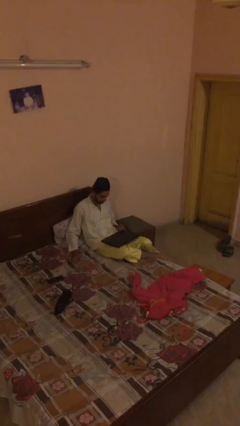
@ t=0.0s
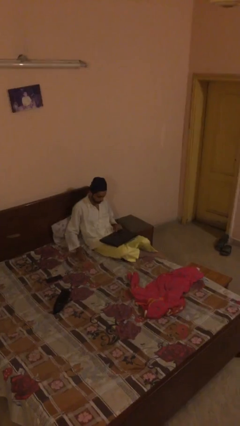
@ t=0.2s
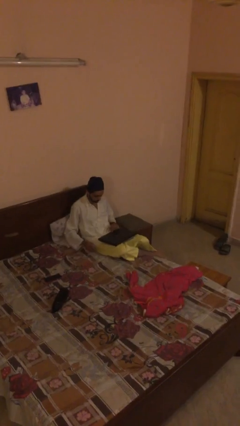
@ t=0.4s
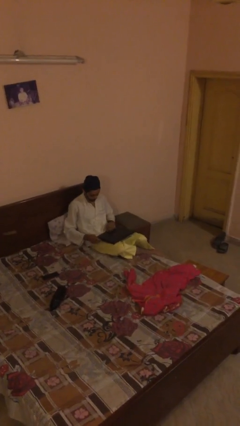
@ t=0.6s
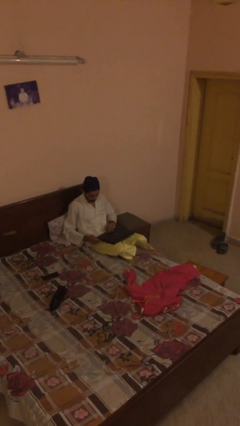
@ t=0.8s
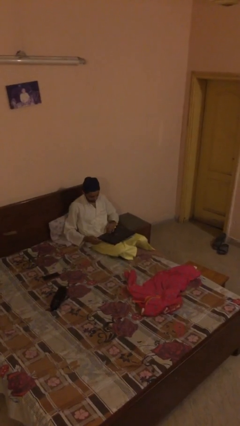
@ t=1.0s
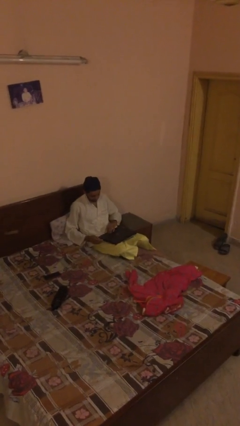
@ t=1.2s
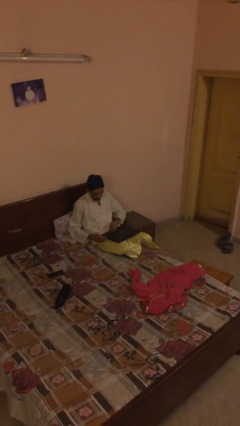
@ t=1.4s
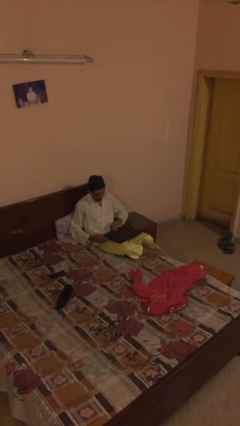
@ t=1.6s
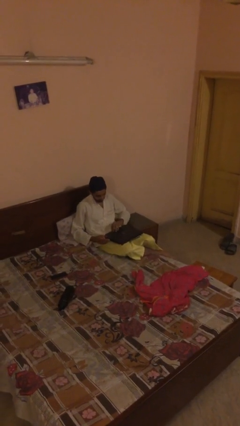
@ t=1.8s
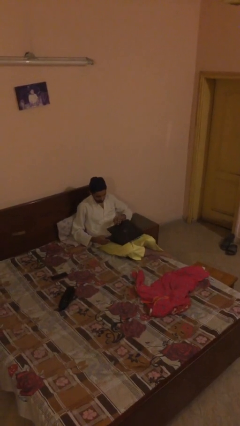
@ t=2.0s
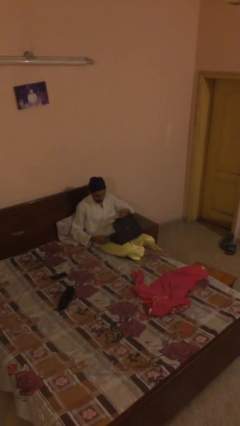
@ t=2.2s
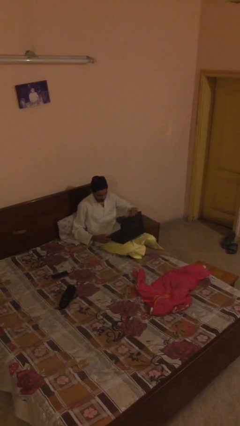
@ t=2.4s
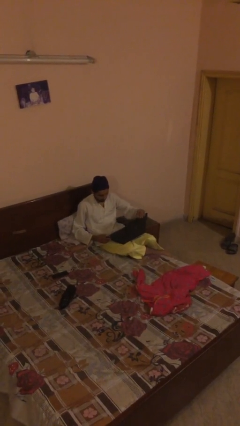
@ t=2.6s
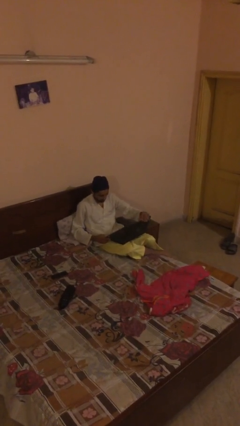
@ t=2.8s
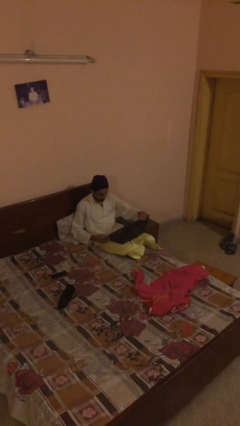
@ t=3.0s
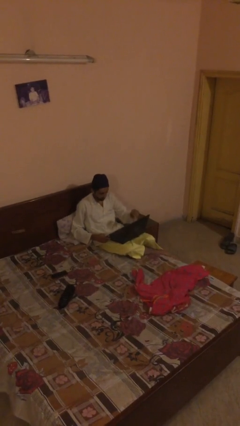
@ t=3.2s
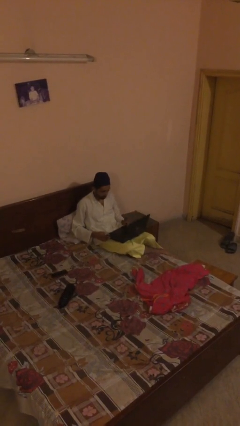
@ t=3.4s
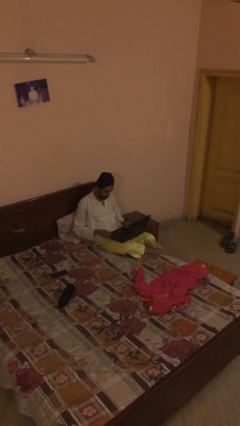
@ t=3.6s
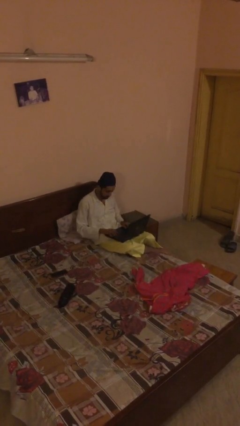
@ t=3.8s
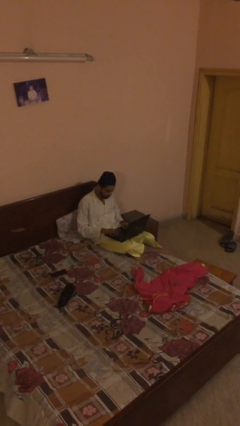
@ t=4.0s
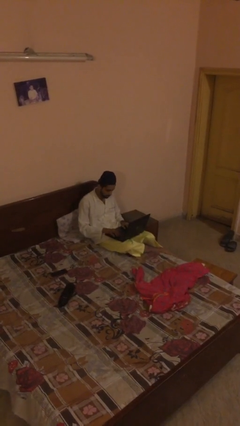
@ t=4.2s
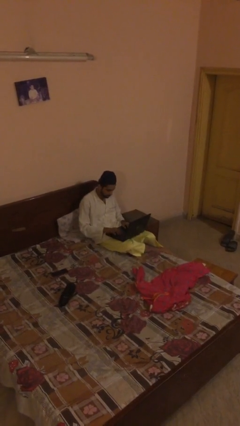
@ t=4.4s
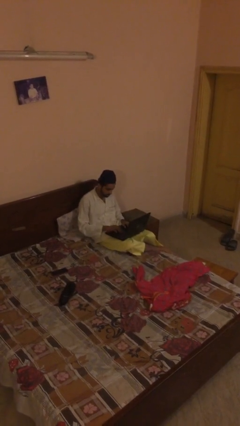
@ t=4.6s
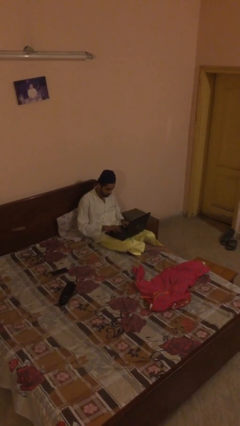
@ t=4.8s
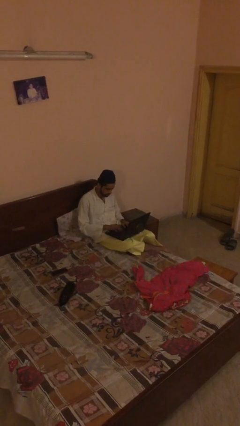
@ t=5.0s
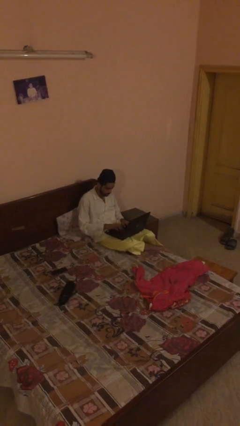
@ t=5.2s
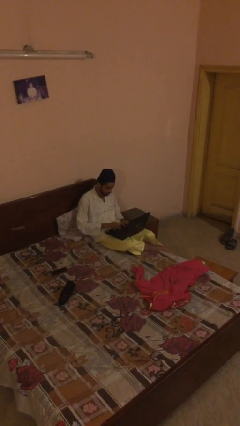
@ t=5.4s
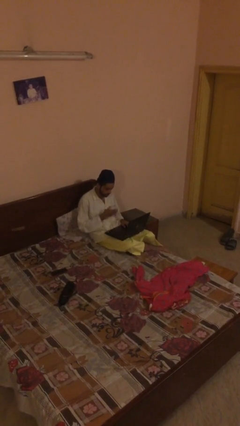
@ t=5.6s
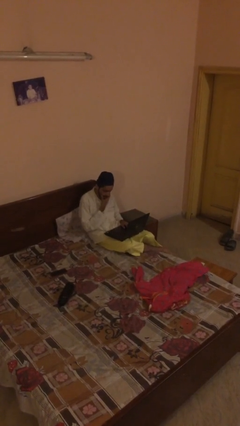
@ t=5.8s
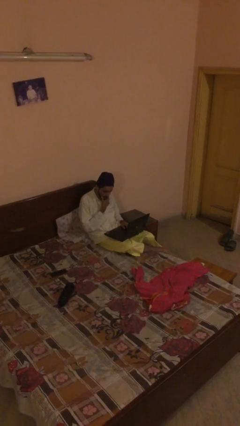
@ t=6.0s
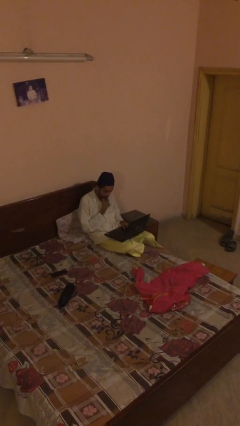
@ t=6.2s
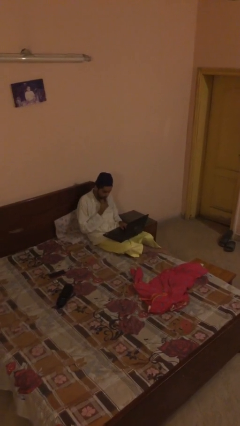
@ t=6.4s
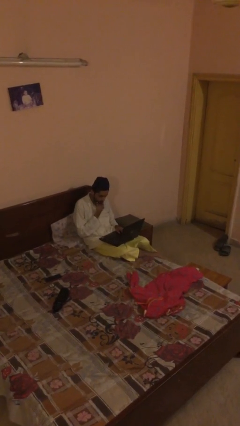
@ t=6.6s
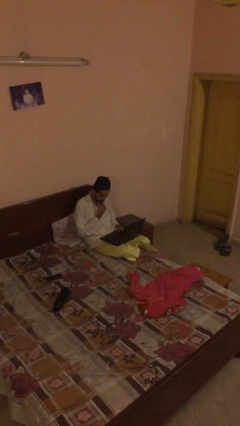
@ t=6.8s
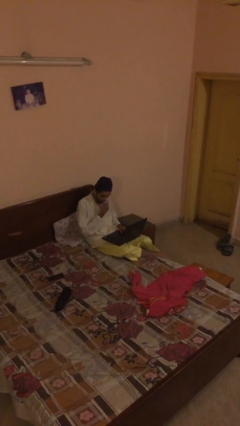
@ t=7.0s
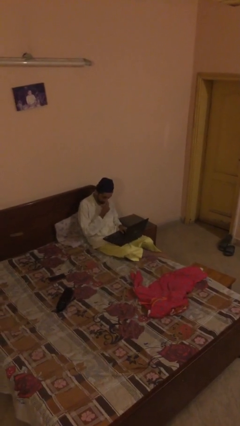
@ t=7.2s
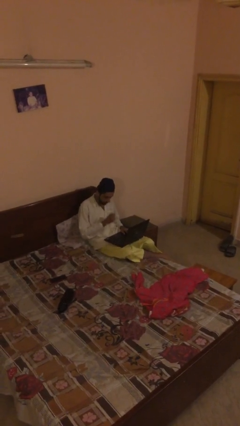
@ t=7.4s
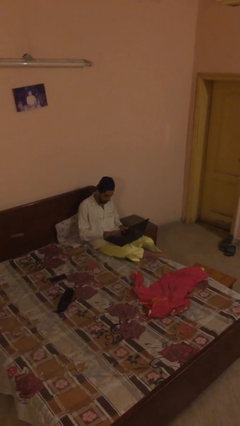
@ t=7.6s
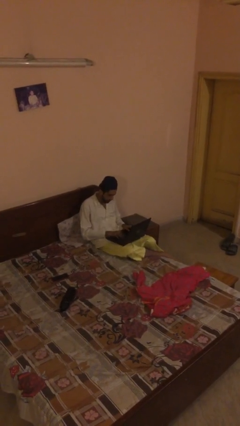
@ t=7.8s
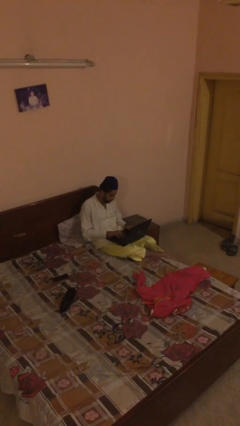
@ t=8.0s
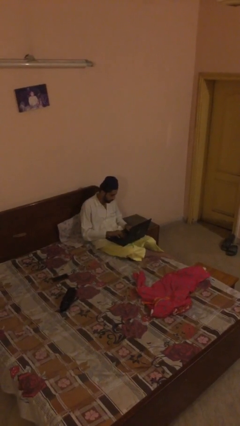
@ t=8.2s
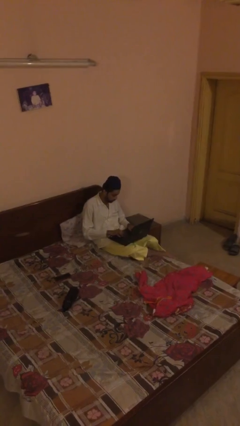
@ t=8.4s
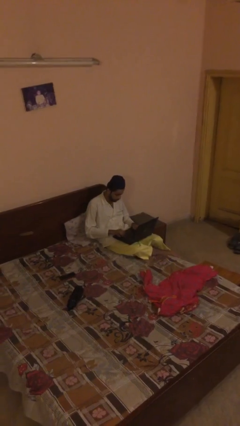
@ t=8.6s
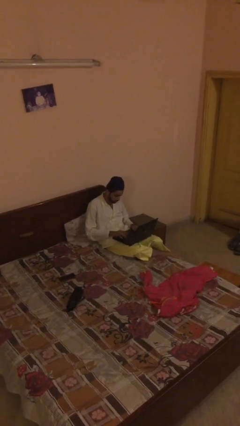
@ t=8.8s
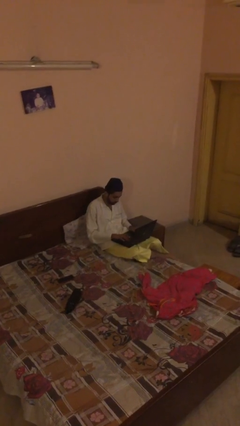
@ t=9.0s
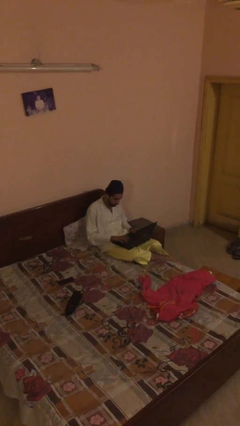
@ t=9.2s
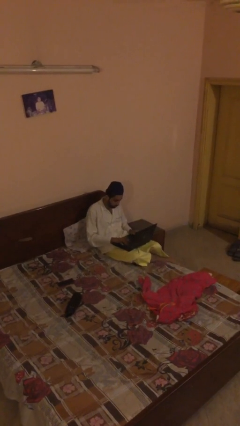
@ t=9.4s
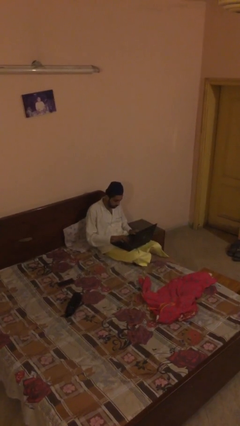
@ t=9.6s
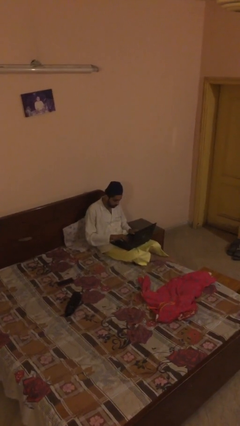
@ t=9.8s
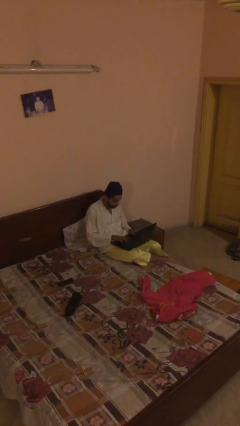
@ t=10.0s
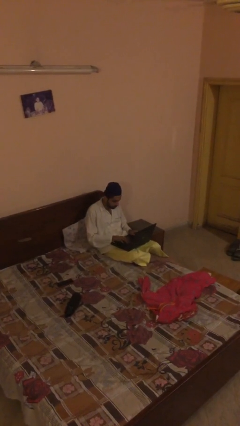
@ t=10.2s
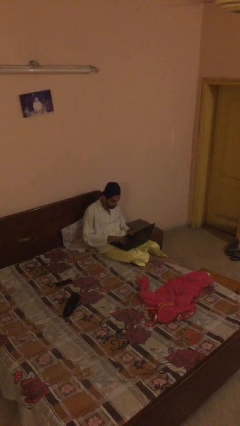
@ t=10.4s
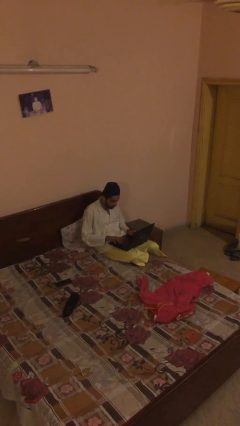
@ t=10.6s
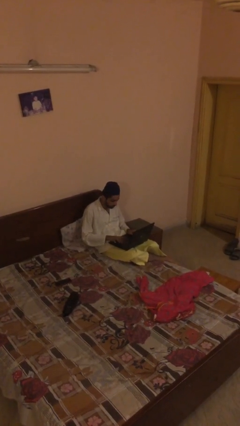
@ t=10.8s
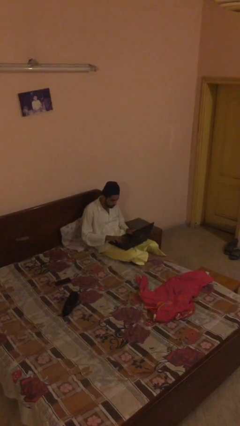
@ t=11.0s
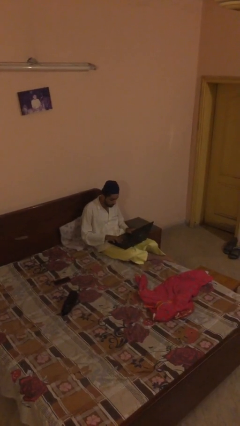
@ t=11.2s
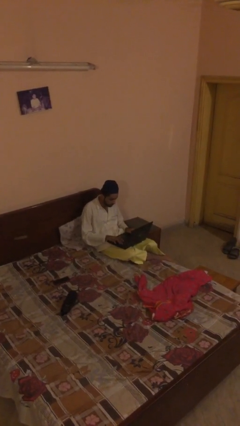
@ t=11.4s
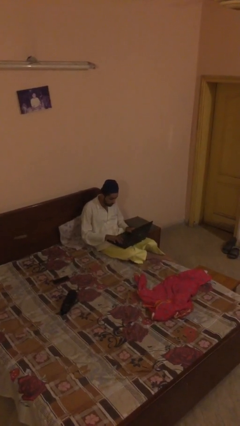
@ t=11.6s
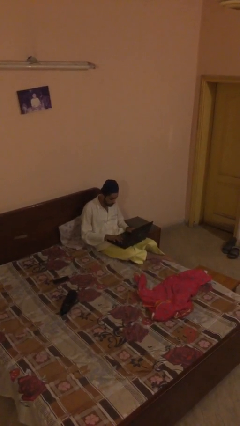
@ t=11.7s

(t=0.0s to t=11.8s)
person interacts with laptop

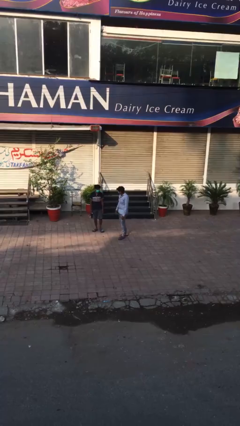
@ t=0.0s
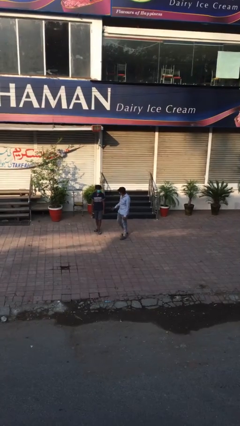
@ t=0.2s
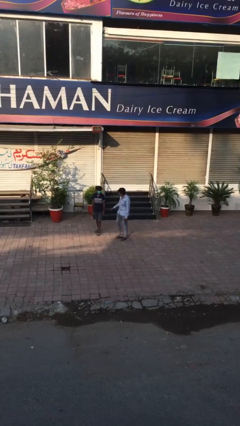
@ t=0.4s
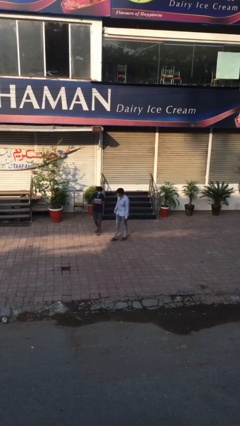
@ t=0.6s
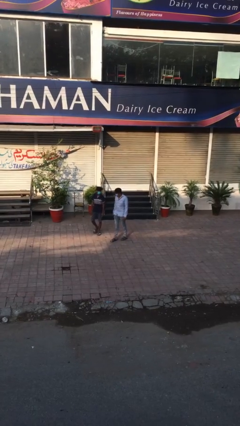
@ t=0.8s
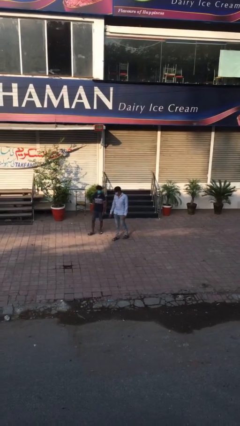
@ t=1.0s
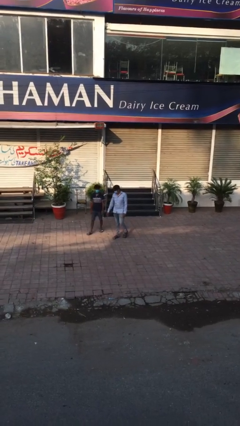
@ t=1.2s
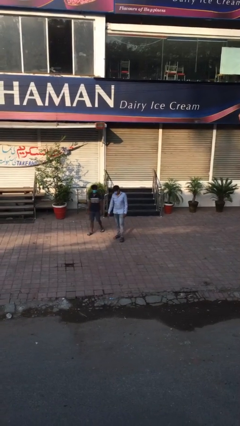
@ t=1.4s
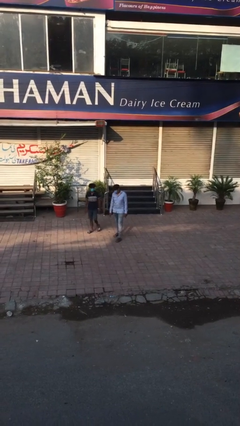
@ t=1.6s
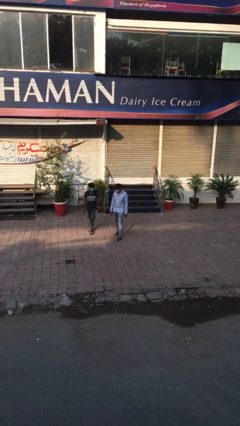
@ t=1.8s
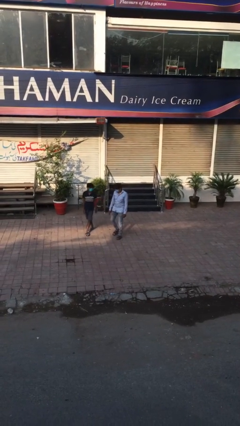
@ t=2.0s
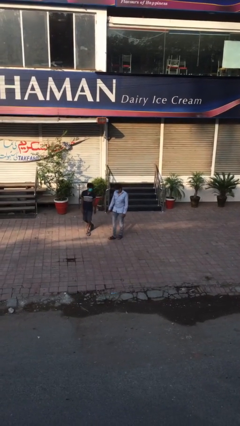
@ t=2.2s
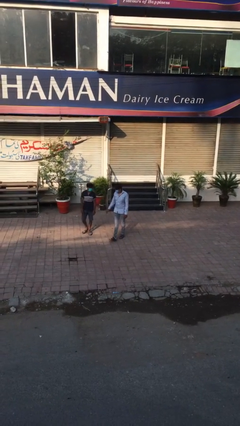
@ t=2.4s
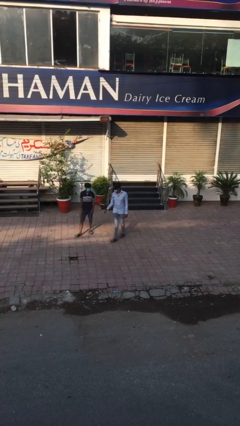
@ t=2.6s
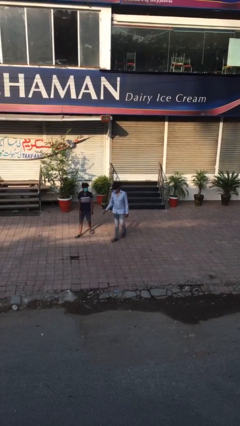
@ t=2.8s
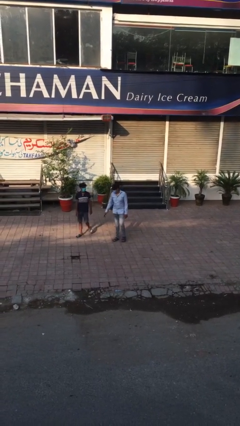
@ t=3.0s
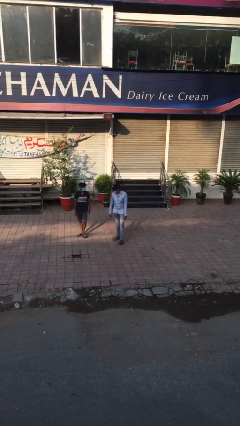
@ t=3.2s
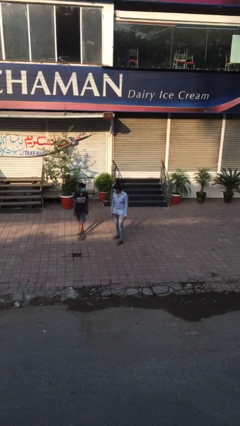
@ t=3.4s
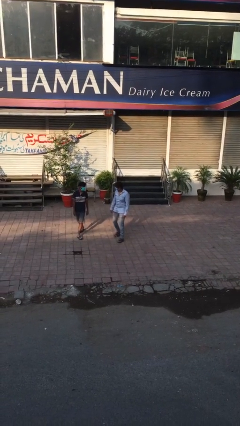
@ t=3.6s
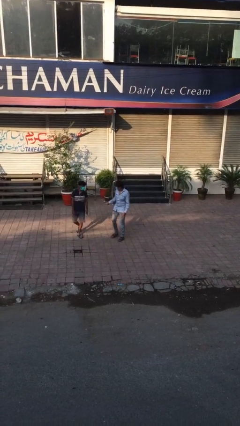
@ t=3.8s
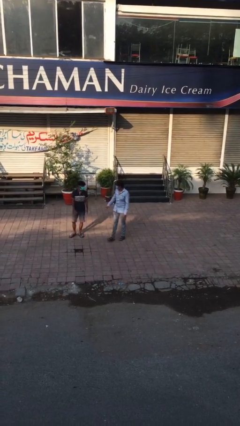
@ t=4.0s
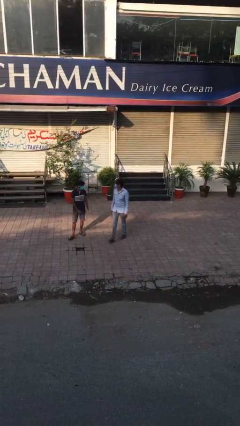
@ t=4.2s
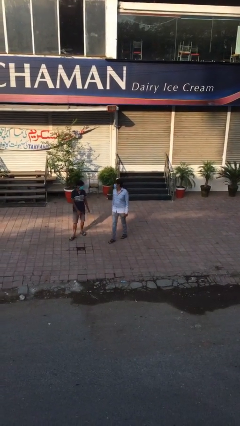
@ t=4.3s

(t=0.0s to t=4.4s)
person talks to person

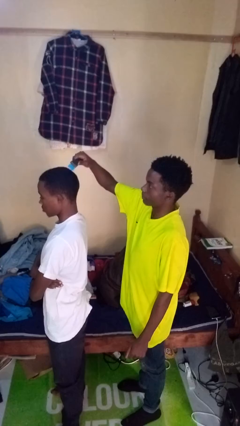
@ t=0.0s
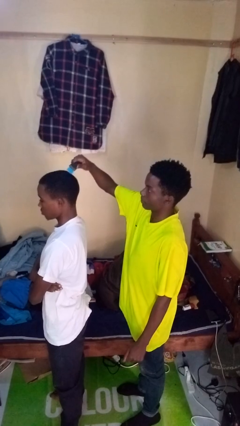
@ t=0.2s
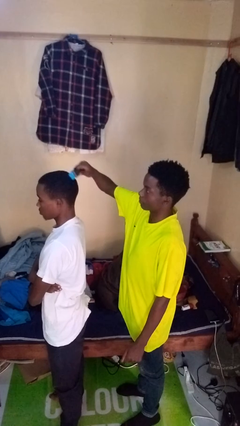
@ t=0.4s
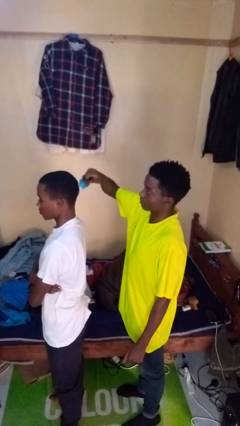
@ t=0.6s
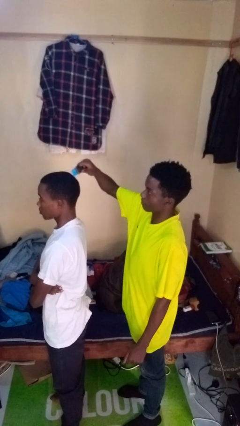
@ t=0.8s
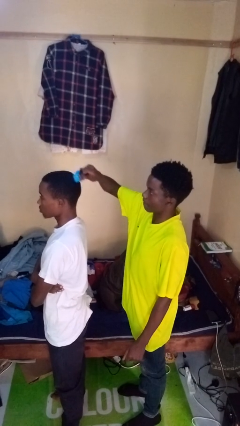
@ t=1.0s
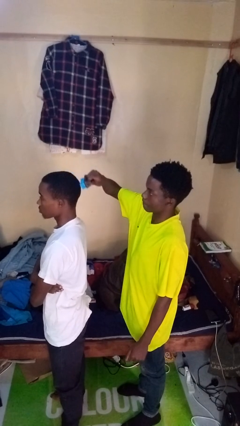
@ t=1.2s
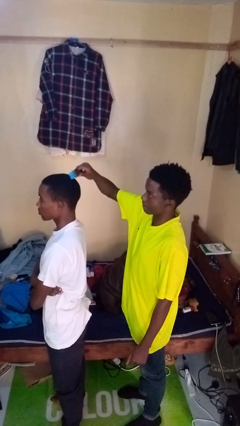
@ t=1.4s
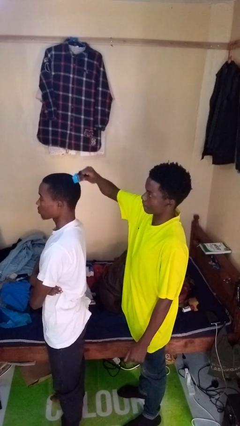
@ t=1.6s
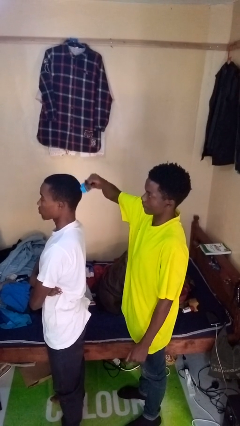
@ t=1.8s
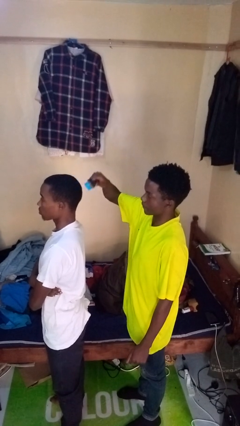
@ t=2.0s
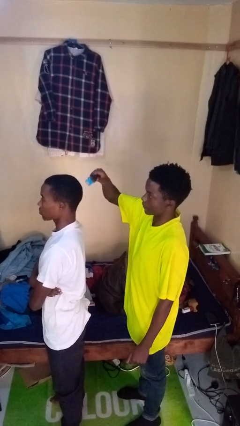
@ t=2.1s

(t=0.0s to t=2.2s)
person brushes hair of person
